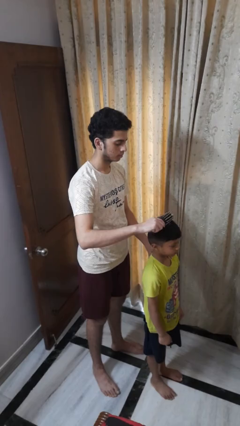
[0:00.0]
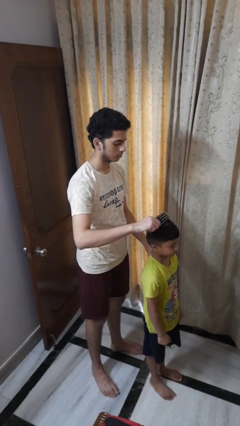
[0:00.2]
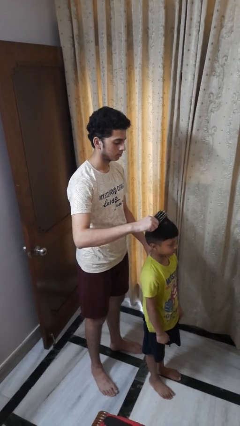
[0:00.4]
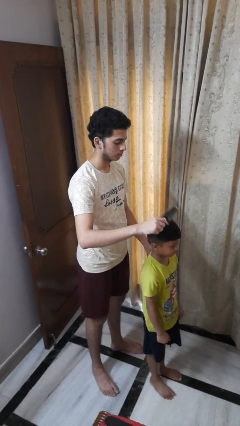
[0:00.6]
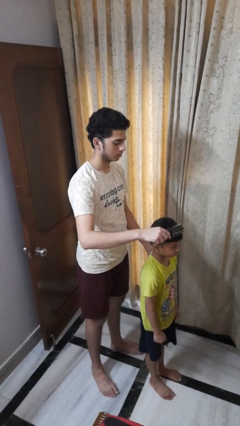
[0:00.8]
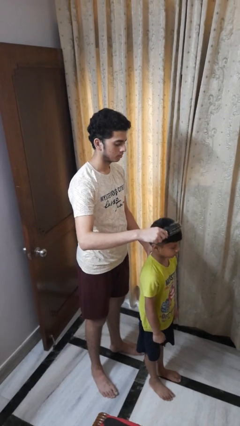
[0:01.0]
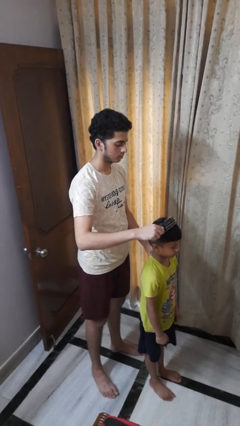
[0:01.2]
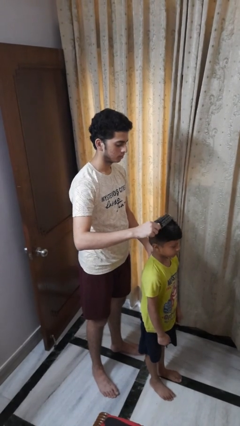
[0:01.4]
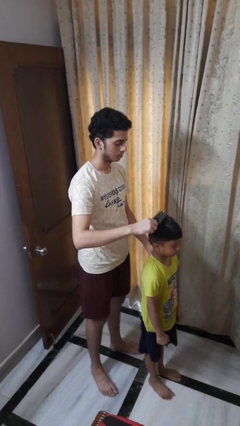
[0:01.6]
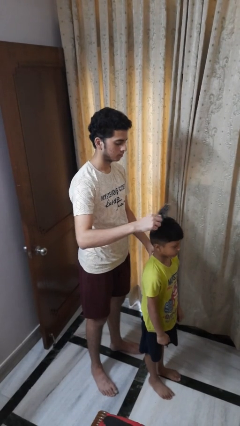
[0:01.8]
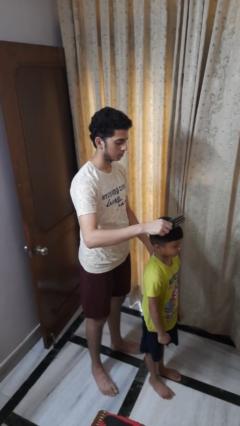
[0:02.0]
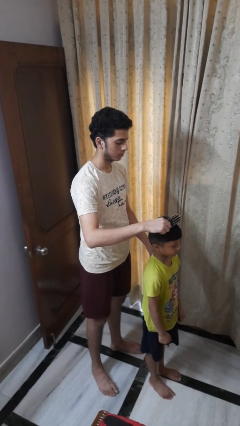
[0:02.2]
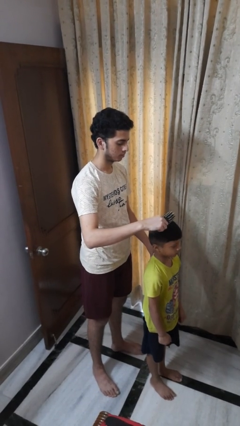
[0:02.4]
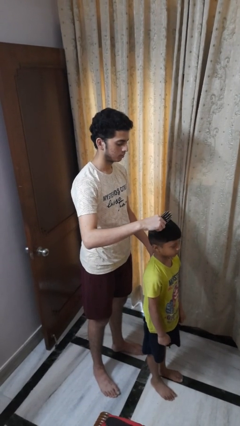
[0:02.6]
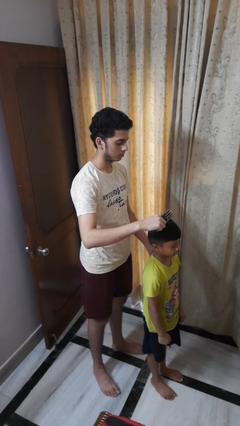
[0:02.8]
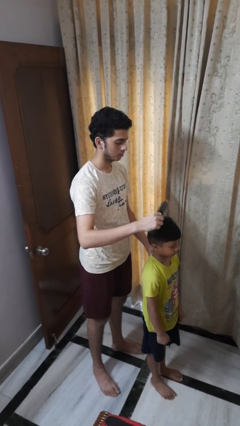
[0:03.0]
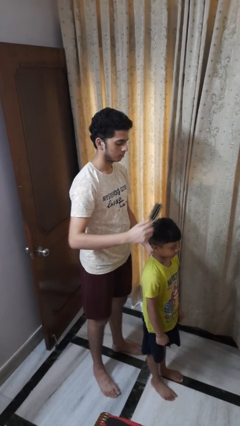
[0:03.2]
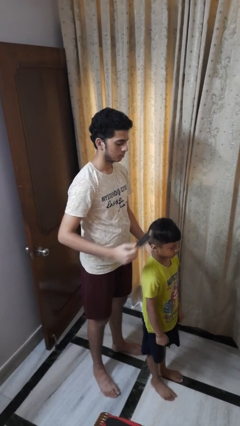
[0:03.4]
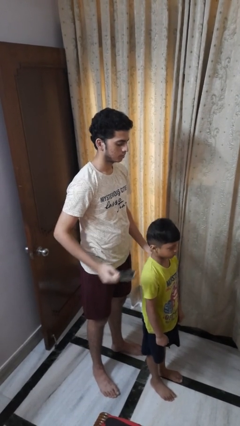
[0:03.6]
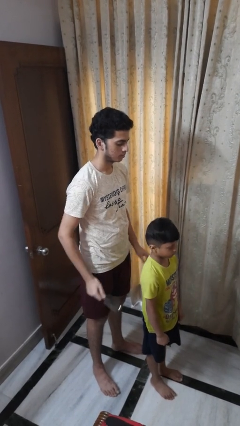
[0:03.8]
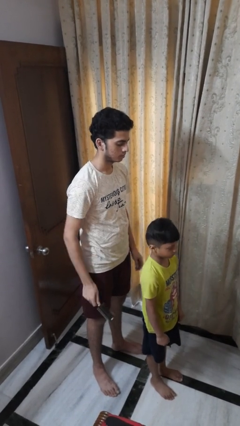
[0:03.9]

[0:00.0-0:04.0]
person brushes hair of person

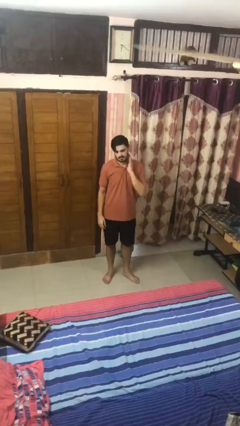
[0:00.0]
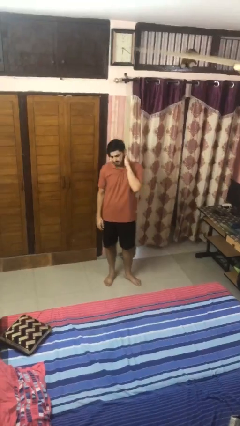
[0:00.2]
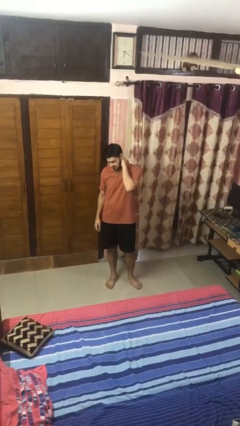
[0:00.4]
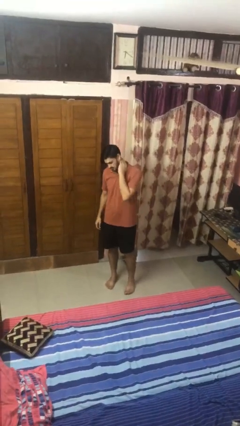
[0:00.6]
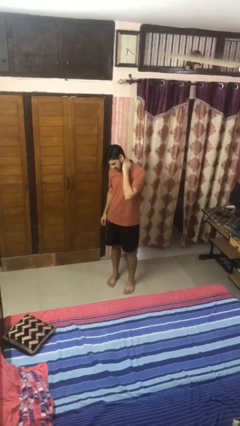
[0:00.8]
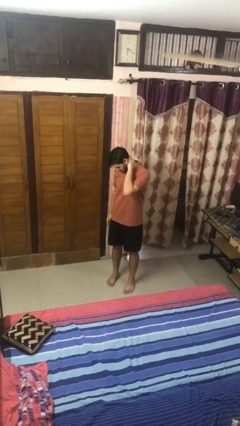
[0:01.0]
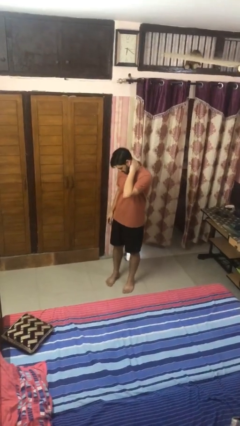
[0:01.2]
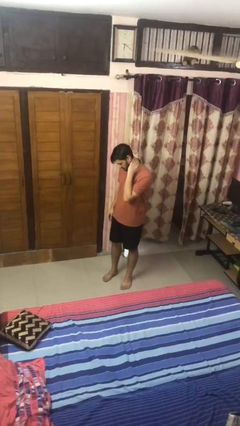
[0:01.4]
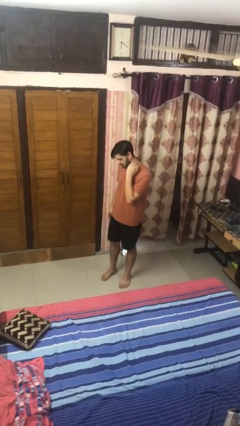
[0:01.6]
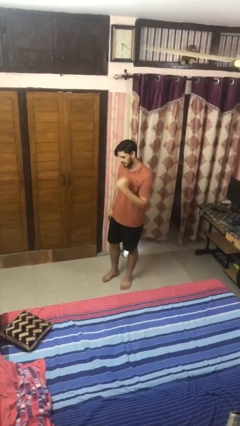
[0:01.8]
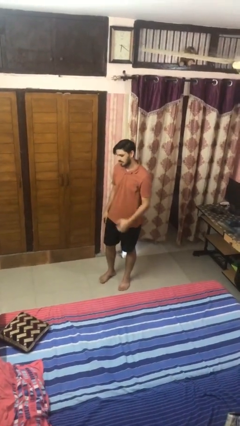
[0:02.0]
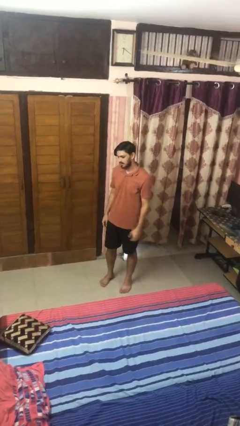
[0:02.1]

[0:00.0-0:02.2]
person rubs neck

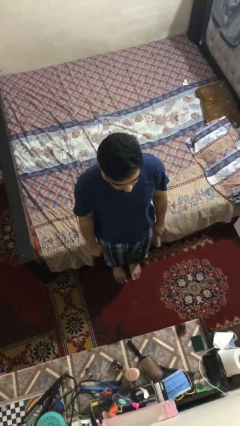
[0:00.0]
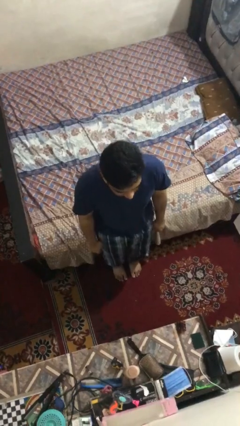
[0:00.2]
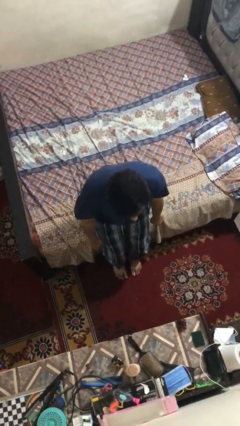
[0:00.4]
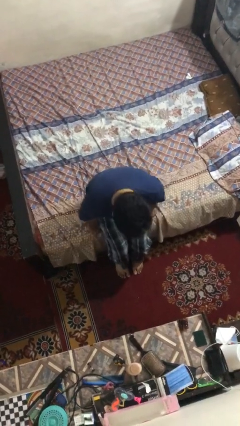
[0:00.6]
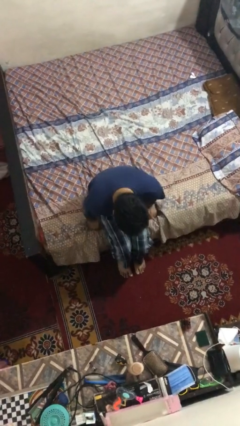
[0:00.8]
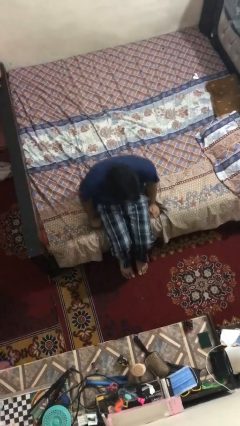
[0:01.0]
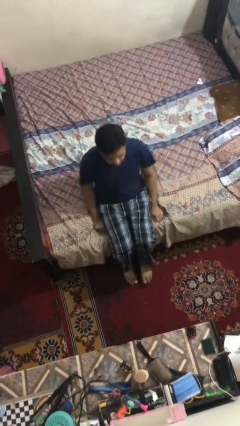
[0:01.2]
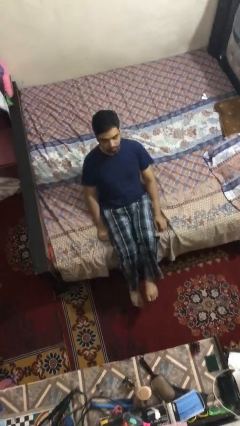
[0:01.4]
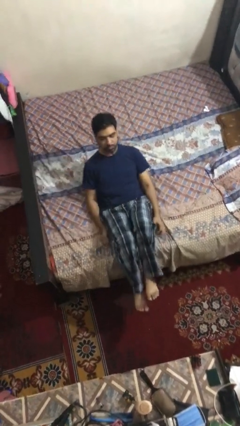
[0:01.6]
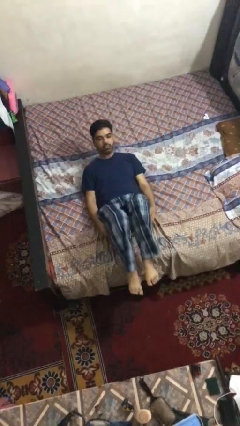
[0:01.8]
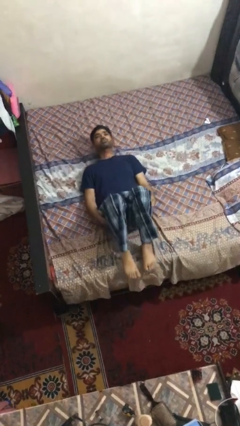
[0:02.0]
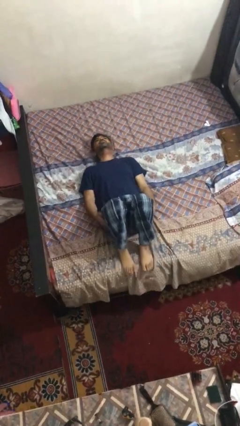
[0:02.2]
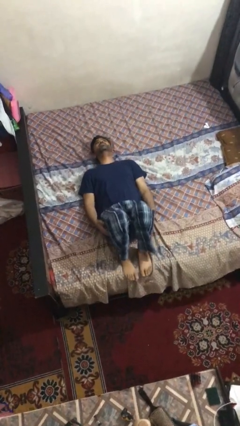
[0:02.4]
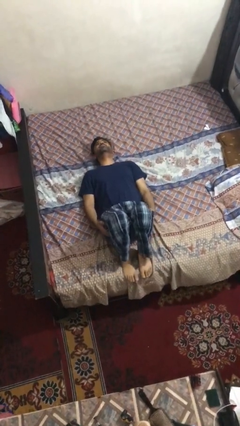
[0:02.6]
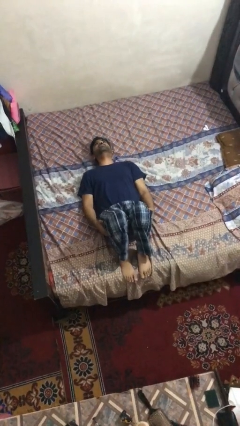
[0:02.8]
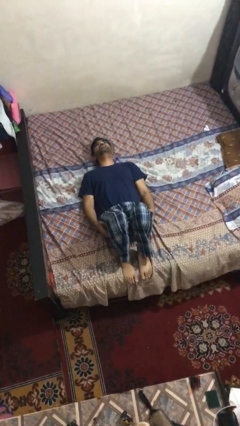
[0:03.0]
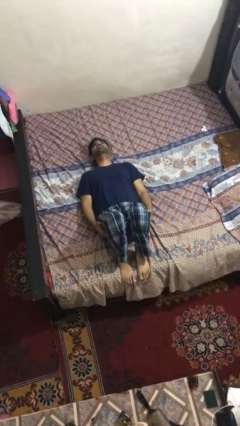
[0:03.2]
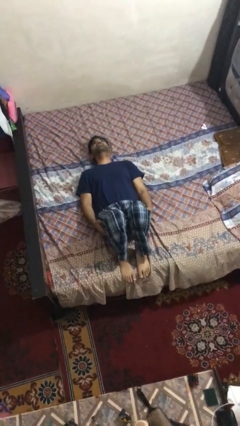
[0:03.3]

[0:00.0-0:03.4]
person lies down on bed

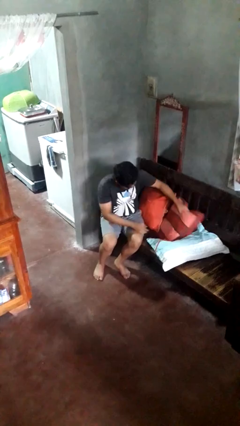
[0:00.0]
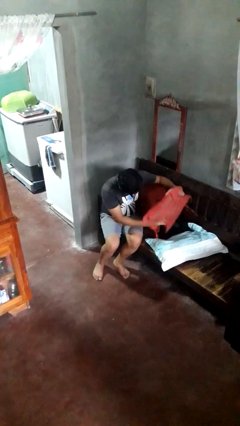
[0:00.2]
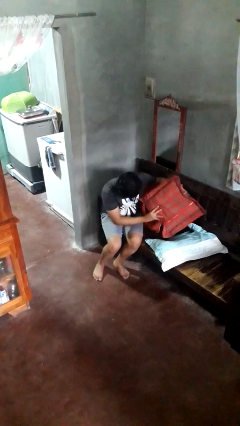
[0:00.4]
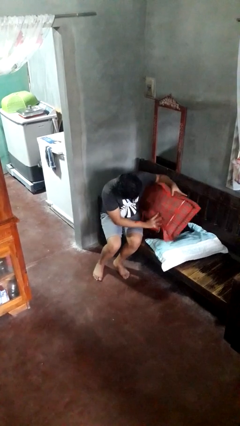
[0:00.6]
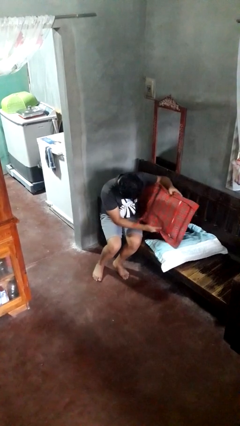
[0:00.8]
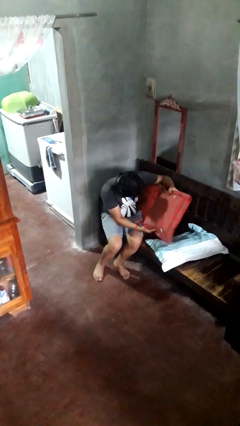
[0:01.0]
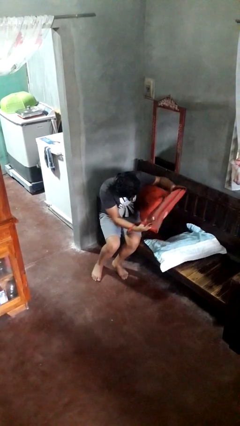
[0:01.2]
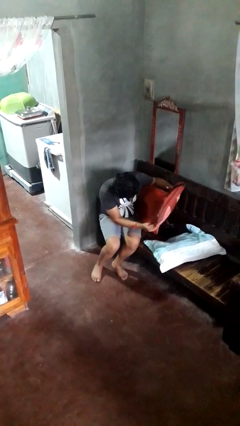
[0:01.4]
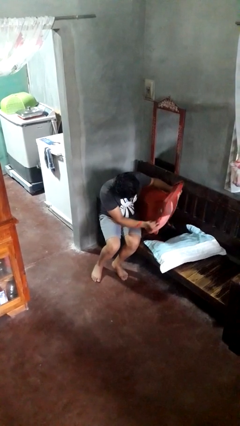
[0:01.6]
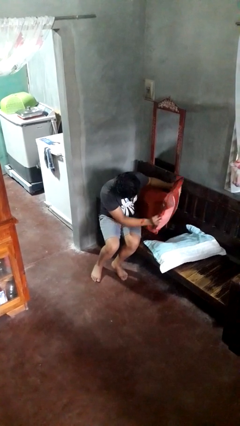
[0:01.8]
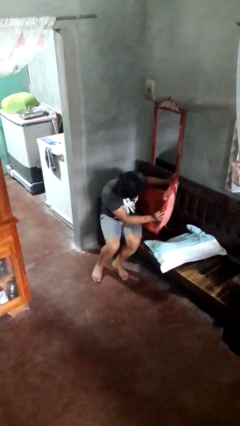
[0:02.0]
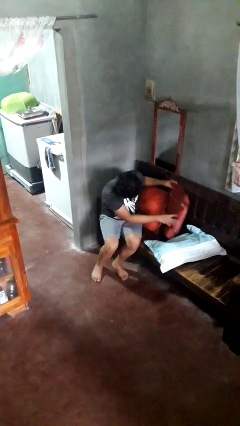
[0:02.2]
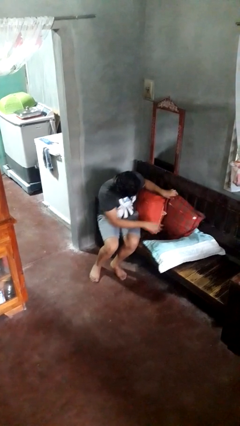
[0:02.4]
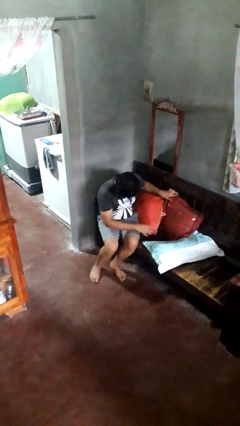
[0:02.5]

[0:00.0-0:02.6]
person searches in couch

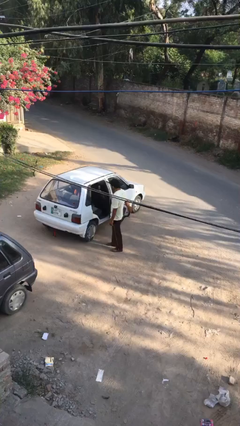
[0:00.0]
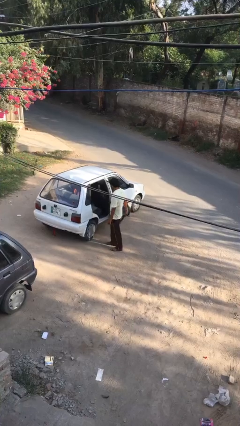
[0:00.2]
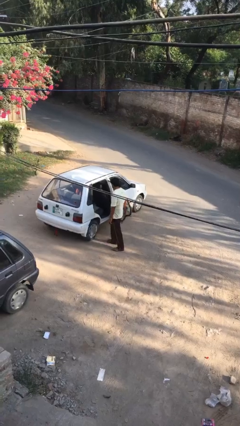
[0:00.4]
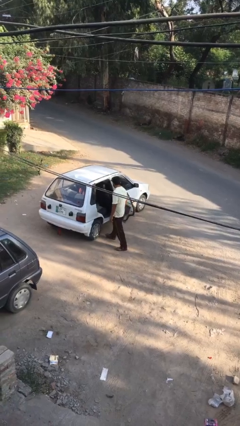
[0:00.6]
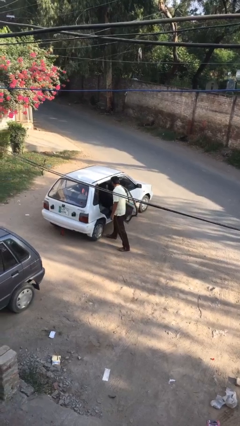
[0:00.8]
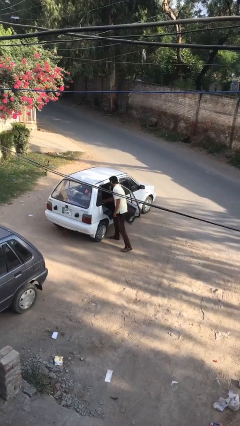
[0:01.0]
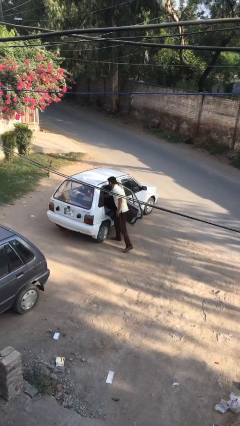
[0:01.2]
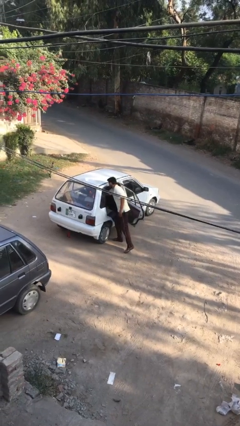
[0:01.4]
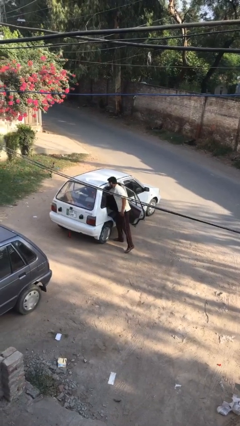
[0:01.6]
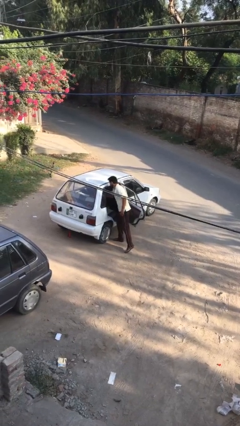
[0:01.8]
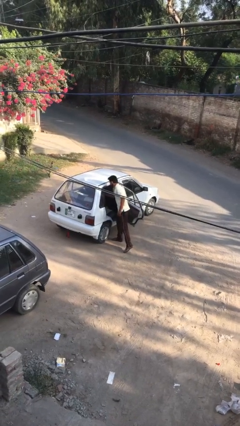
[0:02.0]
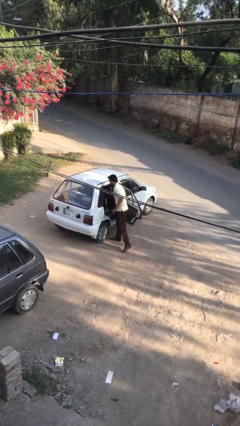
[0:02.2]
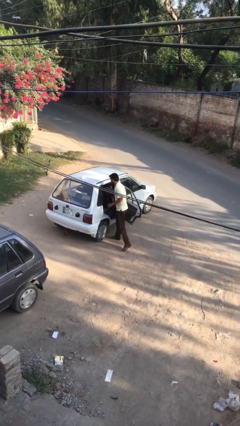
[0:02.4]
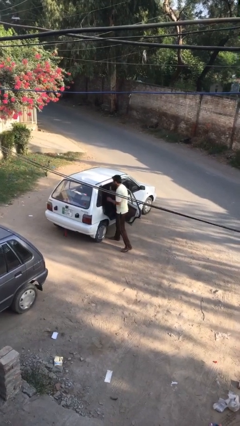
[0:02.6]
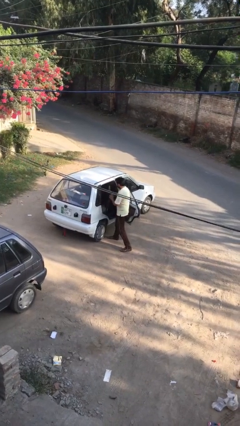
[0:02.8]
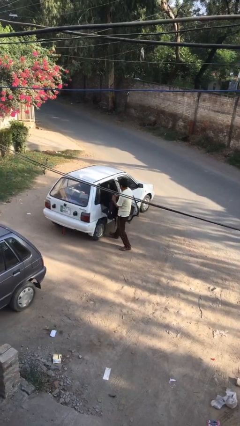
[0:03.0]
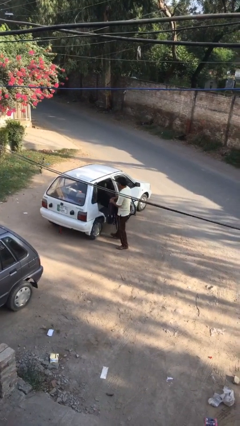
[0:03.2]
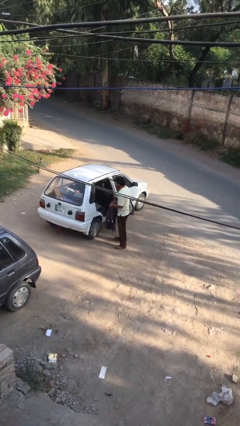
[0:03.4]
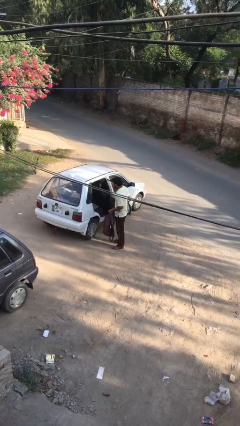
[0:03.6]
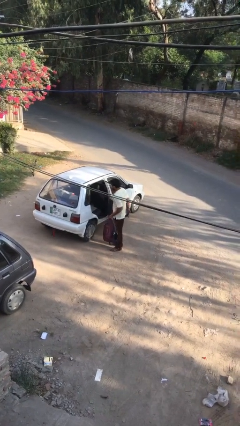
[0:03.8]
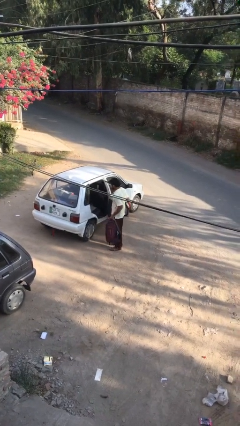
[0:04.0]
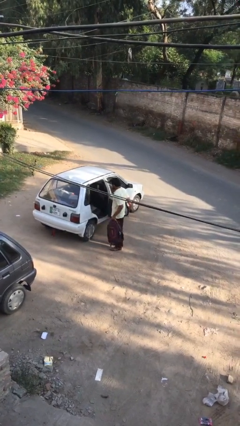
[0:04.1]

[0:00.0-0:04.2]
person unloads car

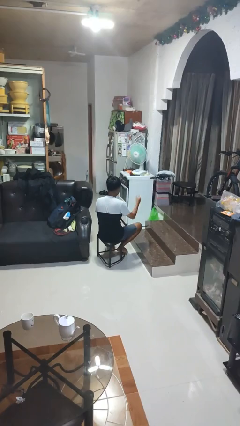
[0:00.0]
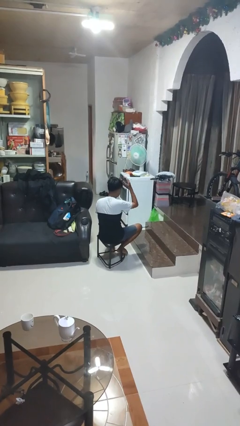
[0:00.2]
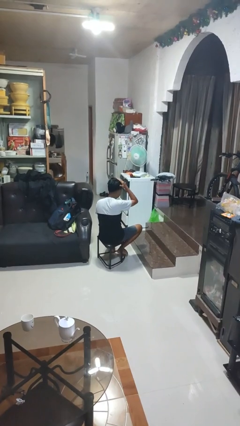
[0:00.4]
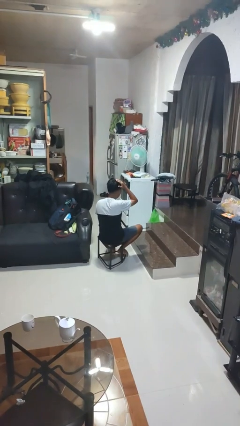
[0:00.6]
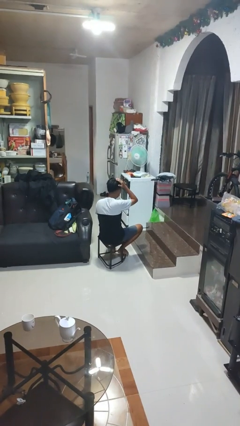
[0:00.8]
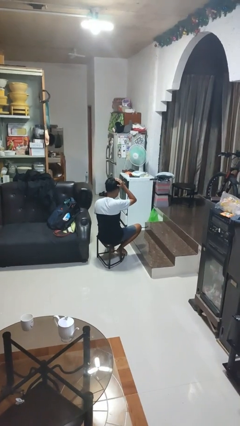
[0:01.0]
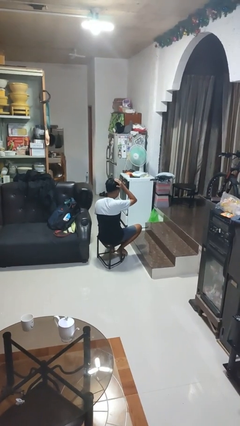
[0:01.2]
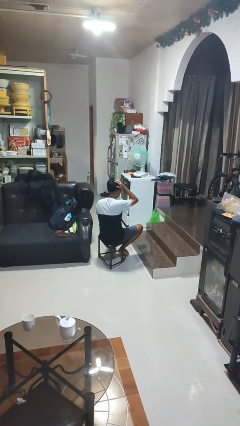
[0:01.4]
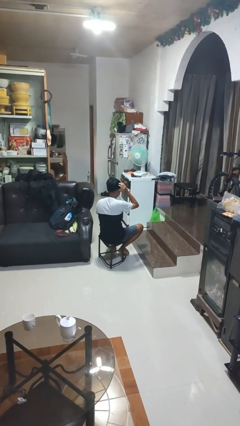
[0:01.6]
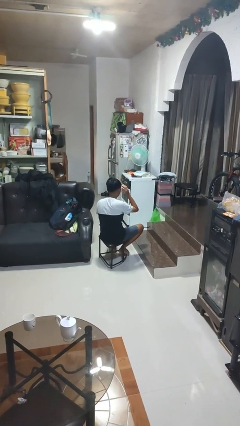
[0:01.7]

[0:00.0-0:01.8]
person pats head
